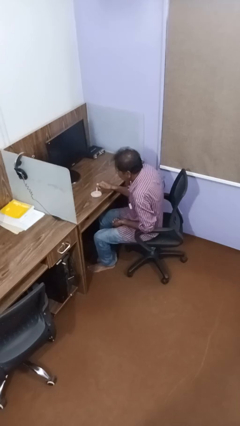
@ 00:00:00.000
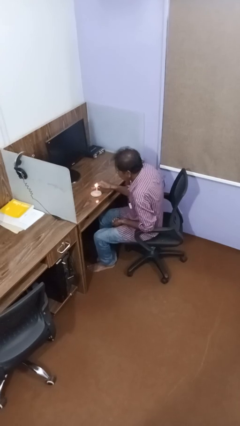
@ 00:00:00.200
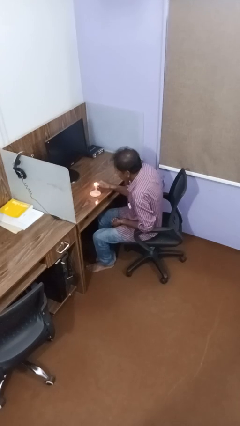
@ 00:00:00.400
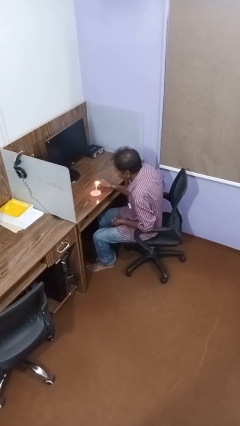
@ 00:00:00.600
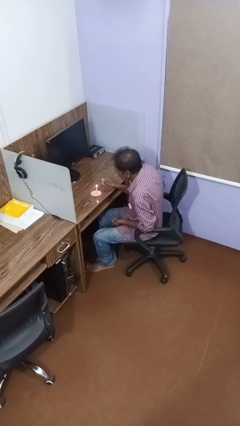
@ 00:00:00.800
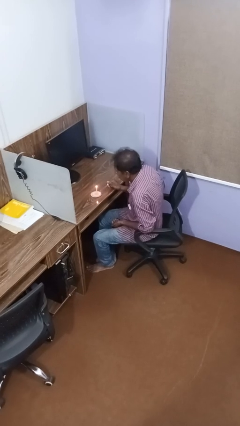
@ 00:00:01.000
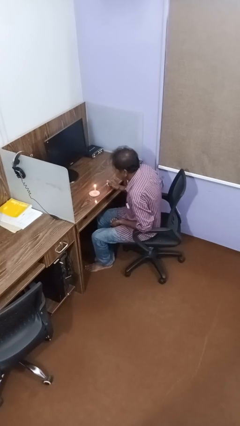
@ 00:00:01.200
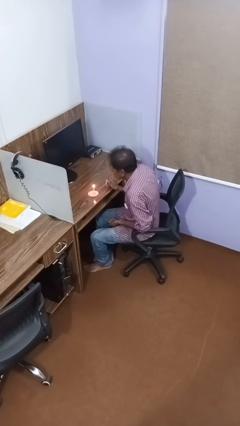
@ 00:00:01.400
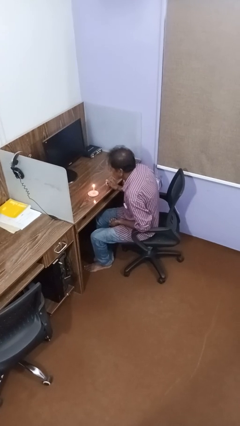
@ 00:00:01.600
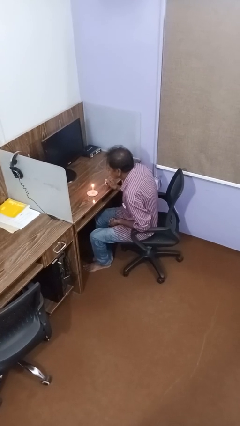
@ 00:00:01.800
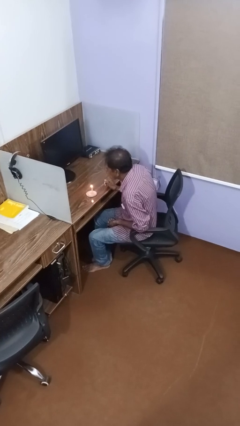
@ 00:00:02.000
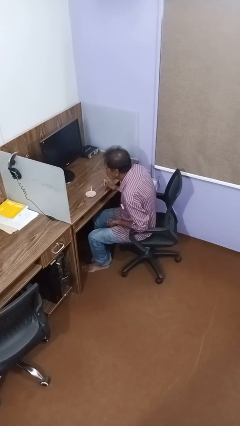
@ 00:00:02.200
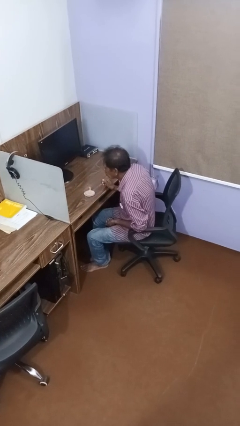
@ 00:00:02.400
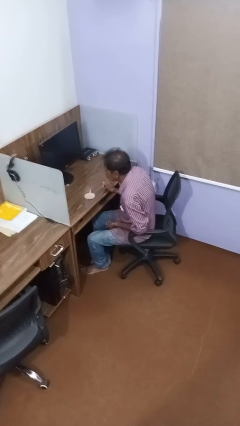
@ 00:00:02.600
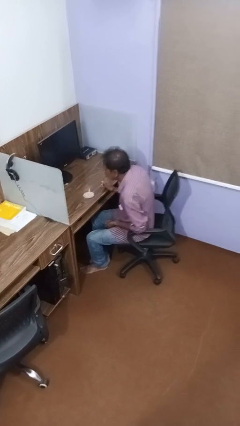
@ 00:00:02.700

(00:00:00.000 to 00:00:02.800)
person lights candle

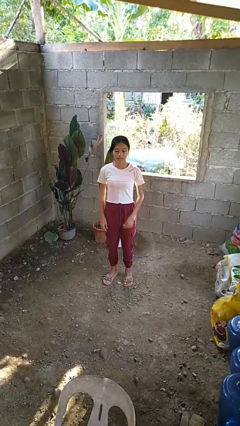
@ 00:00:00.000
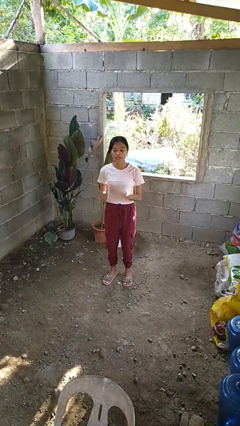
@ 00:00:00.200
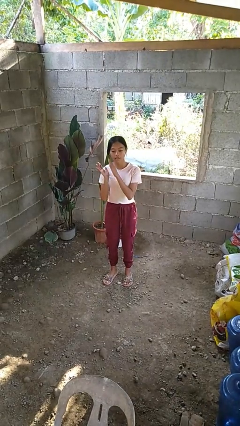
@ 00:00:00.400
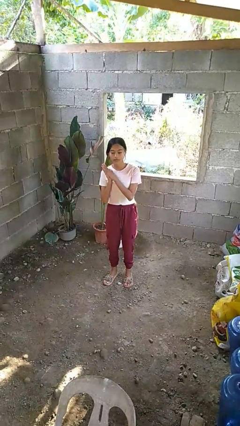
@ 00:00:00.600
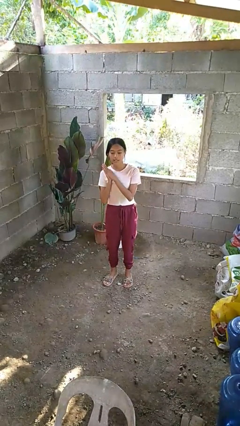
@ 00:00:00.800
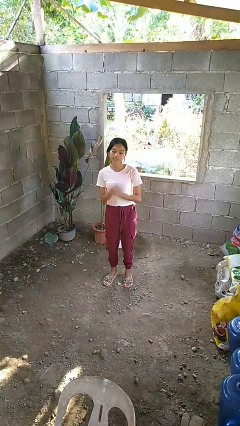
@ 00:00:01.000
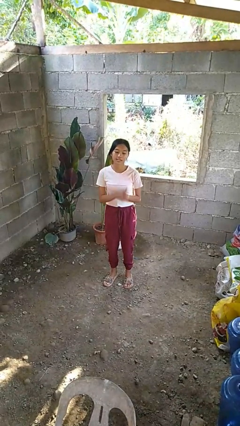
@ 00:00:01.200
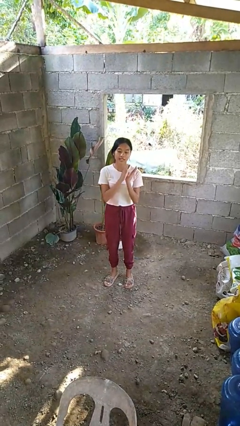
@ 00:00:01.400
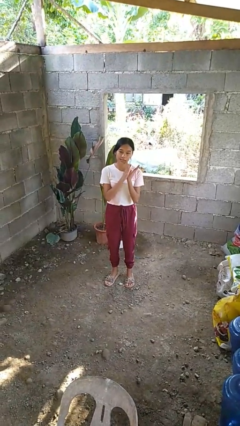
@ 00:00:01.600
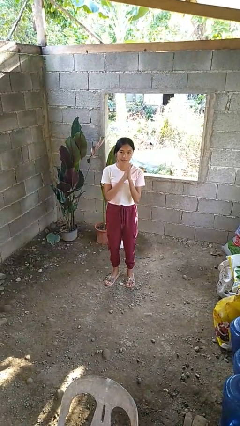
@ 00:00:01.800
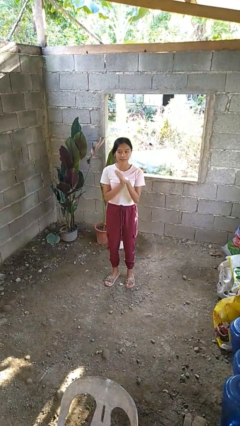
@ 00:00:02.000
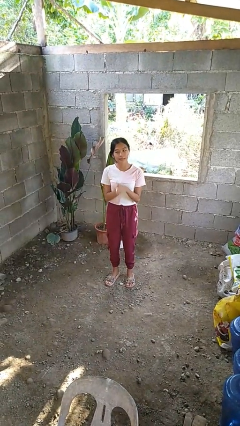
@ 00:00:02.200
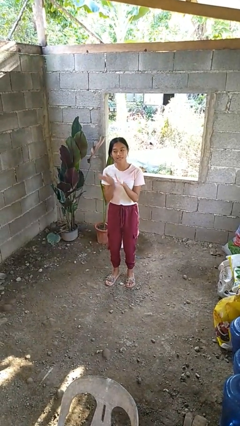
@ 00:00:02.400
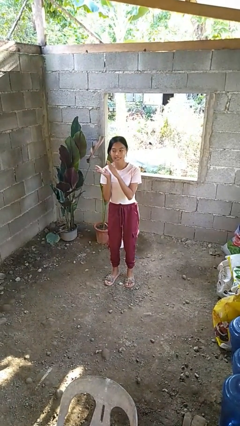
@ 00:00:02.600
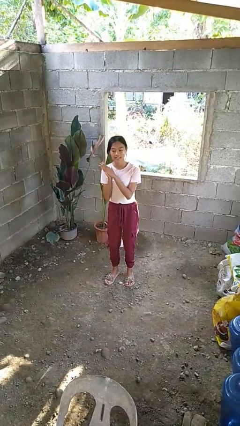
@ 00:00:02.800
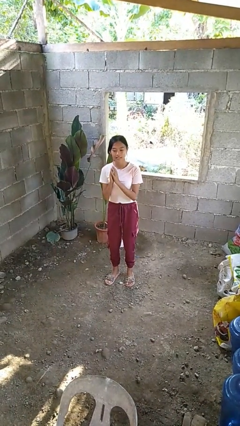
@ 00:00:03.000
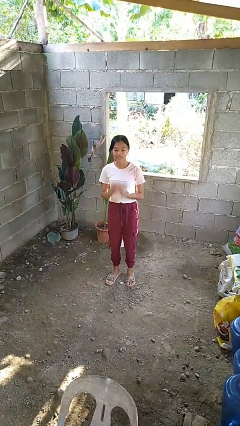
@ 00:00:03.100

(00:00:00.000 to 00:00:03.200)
person dances in place

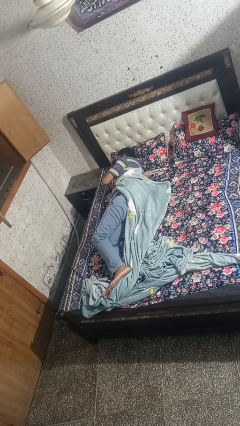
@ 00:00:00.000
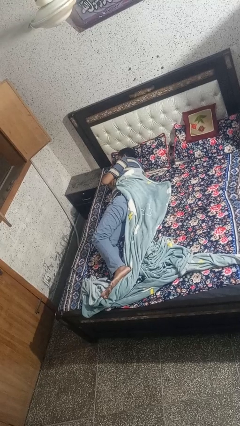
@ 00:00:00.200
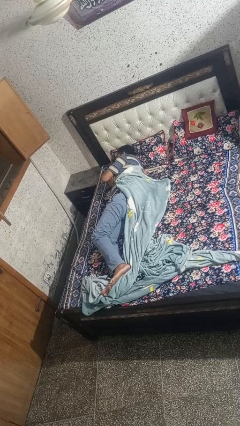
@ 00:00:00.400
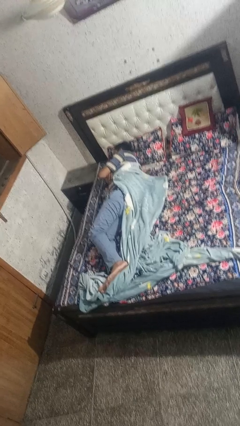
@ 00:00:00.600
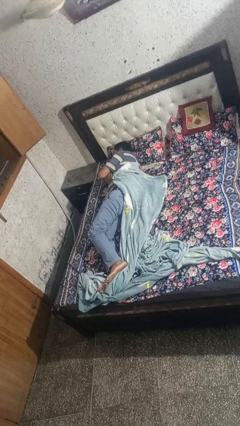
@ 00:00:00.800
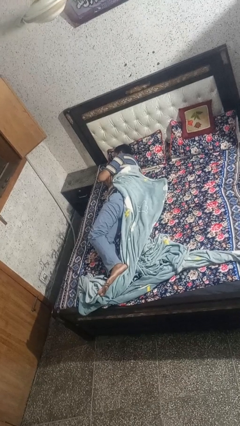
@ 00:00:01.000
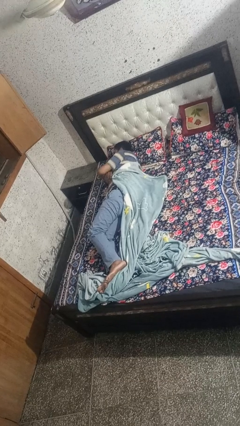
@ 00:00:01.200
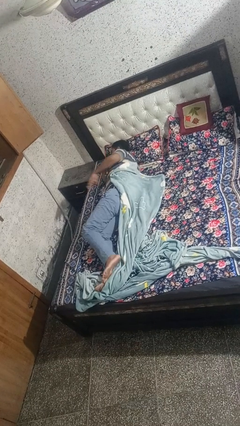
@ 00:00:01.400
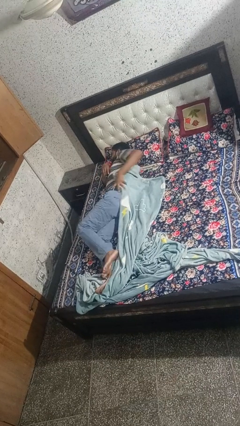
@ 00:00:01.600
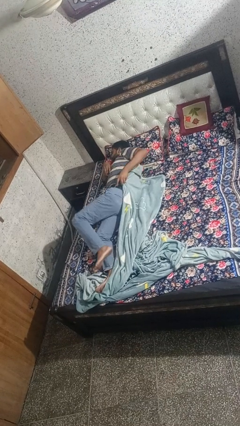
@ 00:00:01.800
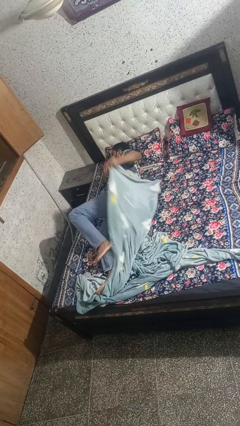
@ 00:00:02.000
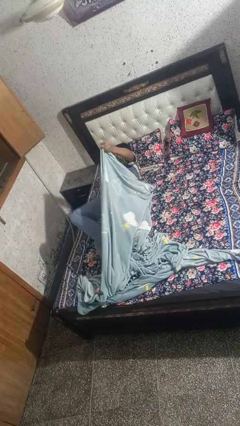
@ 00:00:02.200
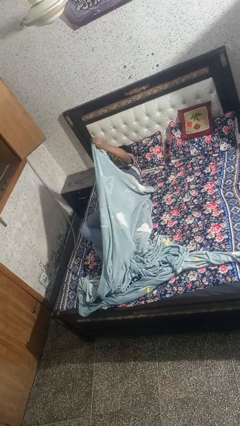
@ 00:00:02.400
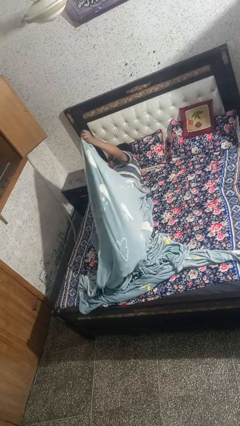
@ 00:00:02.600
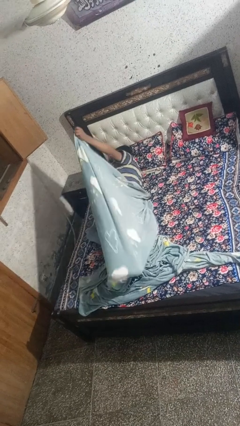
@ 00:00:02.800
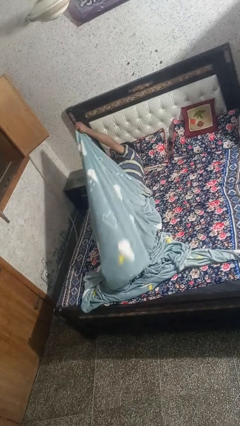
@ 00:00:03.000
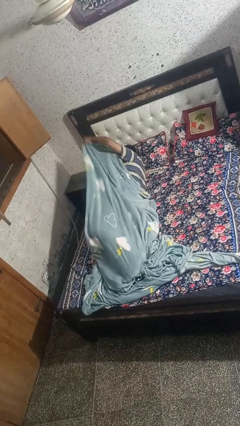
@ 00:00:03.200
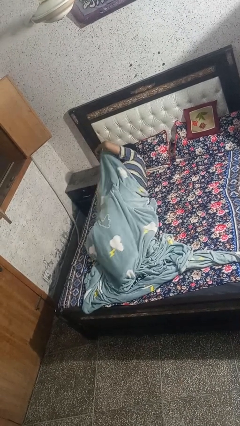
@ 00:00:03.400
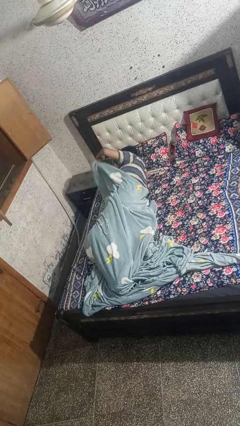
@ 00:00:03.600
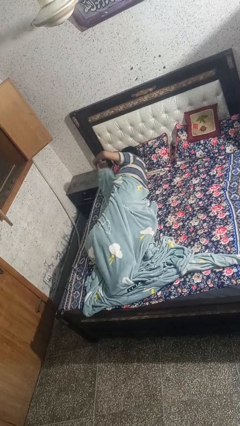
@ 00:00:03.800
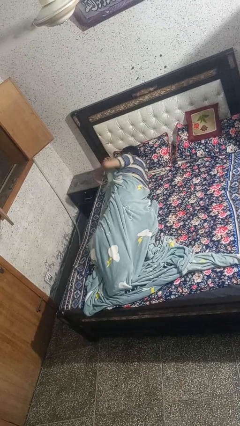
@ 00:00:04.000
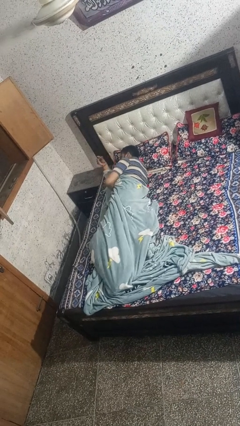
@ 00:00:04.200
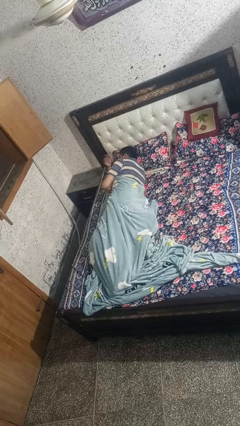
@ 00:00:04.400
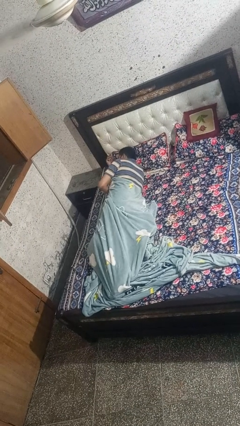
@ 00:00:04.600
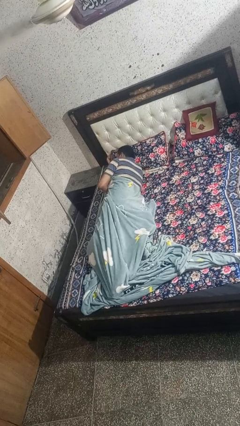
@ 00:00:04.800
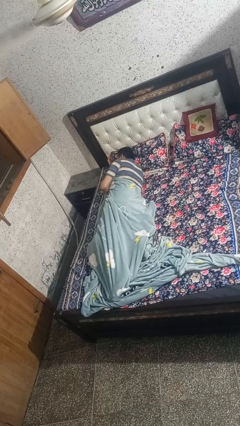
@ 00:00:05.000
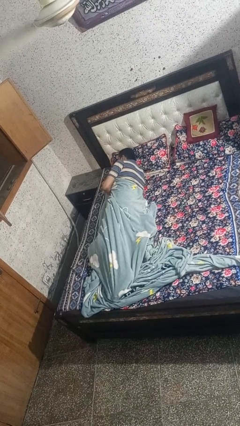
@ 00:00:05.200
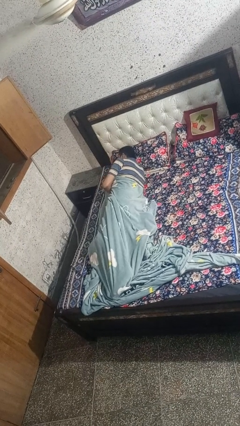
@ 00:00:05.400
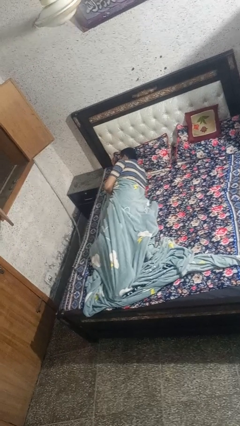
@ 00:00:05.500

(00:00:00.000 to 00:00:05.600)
person covers with bedsheets

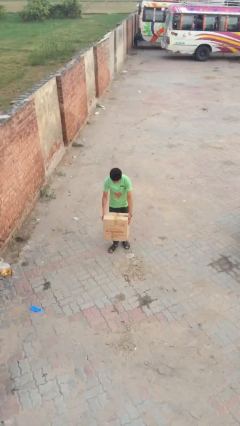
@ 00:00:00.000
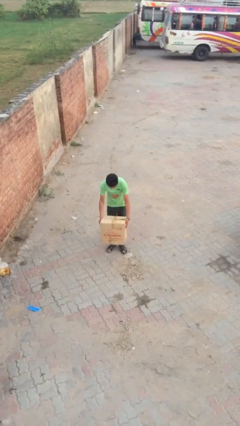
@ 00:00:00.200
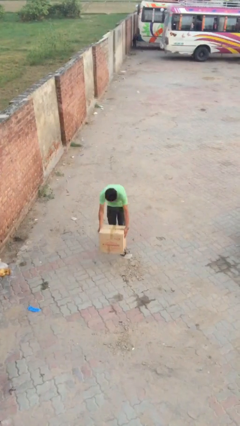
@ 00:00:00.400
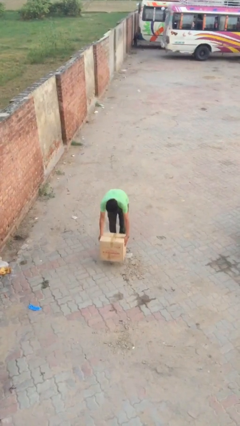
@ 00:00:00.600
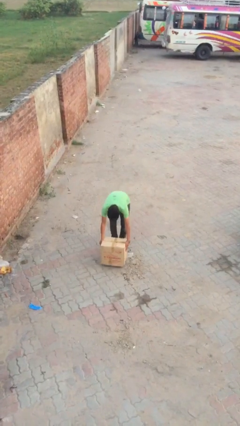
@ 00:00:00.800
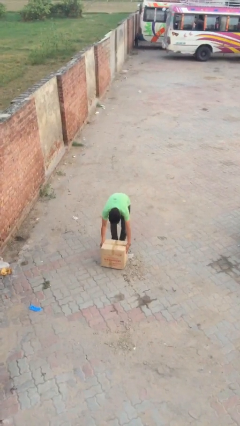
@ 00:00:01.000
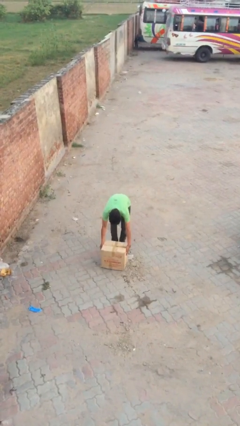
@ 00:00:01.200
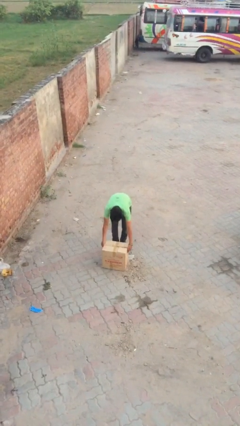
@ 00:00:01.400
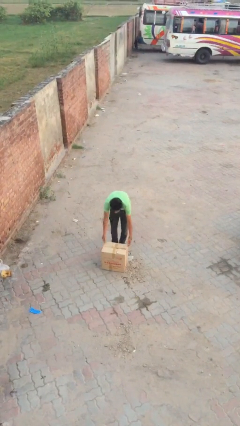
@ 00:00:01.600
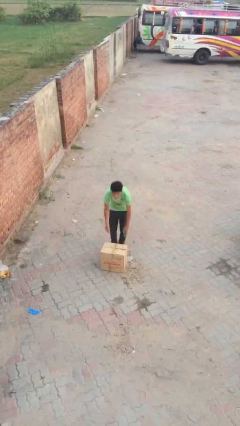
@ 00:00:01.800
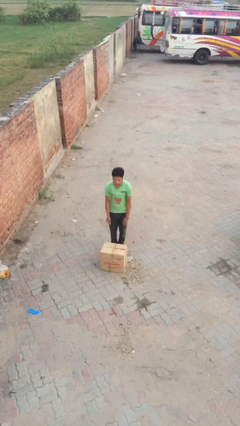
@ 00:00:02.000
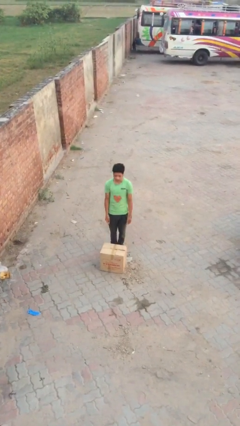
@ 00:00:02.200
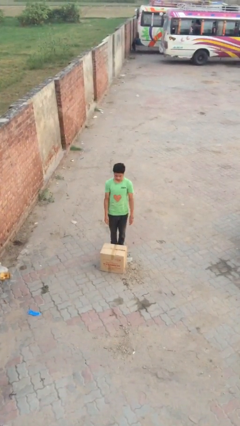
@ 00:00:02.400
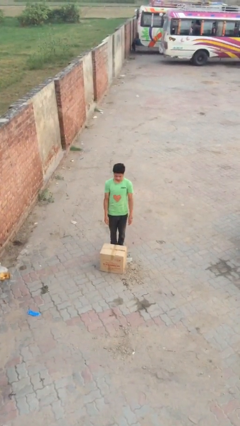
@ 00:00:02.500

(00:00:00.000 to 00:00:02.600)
person puts down object on floor

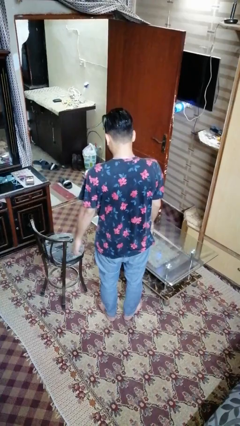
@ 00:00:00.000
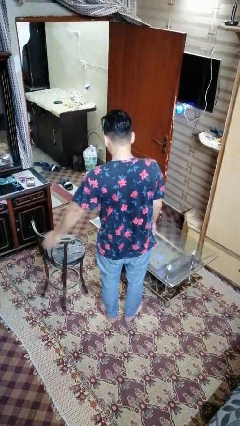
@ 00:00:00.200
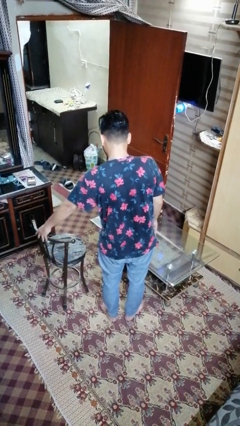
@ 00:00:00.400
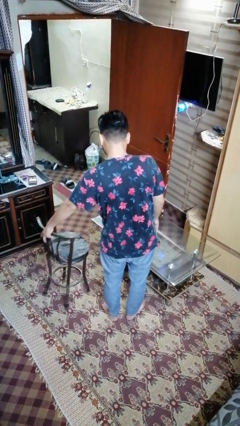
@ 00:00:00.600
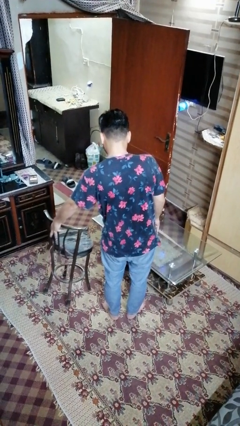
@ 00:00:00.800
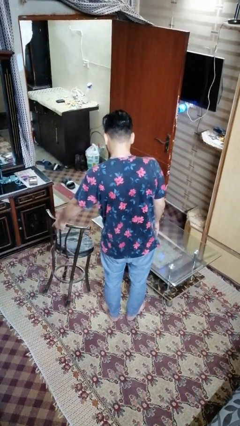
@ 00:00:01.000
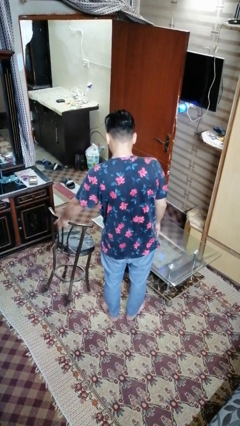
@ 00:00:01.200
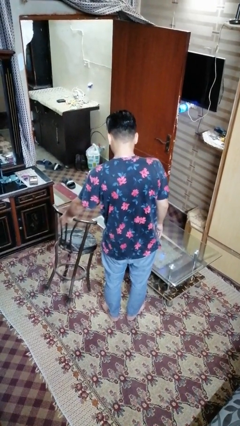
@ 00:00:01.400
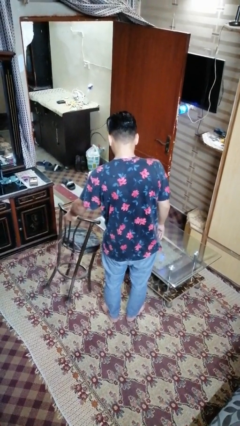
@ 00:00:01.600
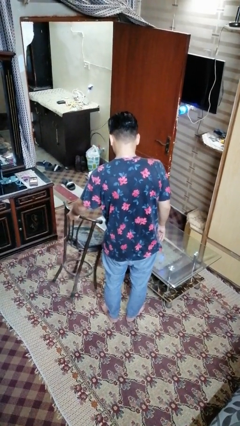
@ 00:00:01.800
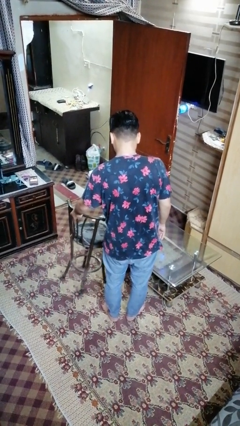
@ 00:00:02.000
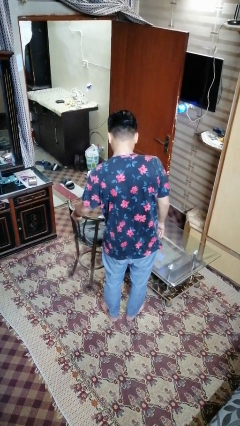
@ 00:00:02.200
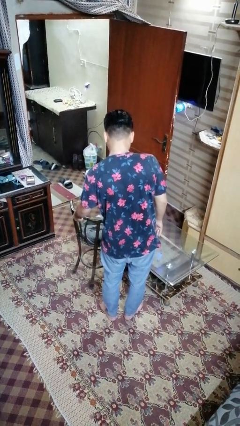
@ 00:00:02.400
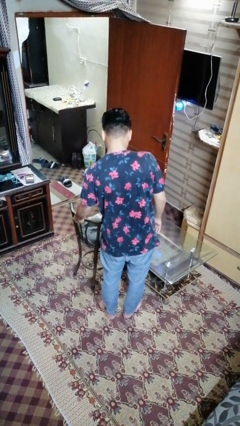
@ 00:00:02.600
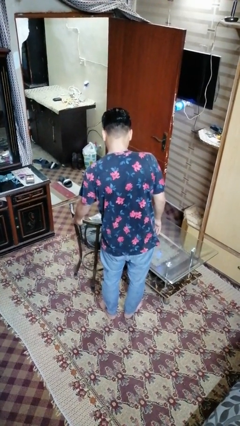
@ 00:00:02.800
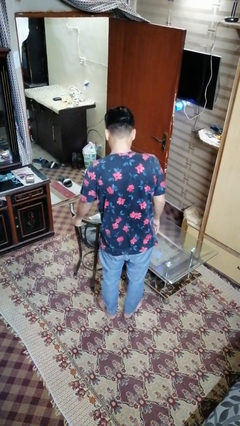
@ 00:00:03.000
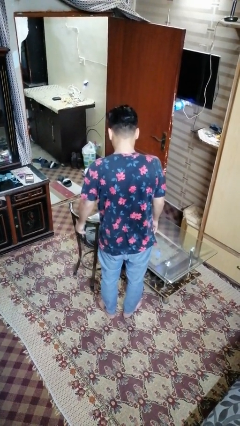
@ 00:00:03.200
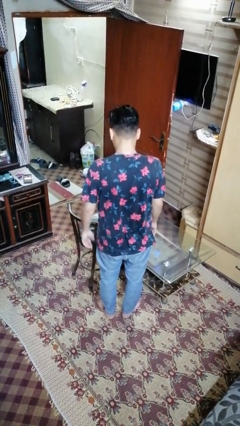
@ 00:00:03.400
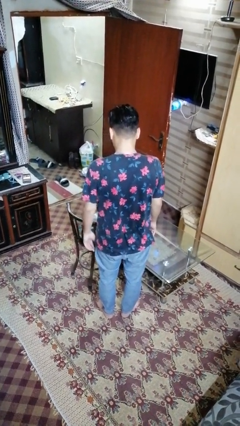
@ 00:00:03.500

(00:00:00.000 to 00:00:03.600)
person pushes in chair
